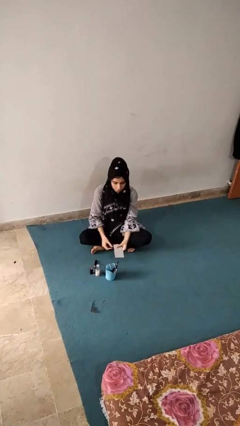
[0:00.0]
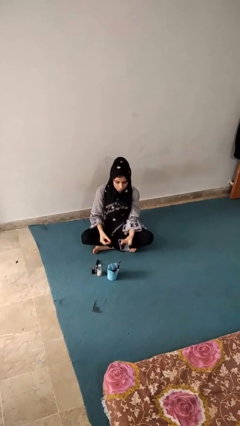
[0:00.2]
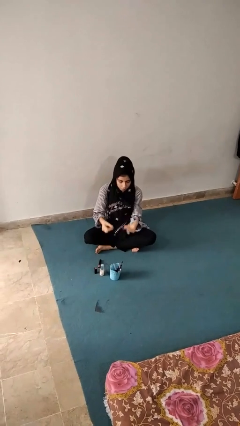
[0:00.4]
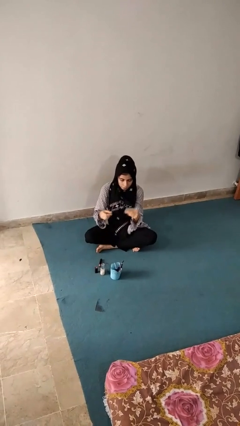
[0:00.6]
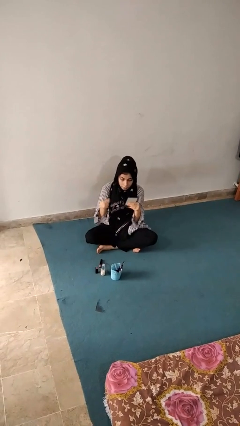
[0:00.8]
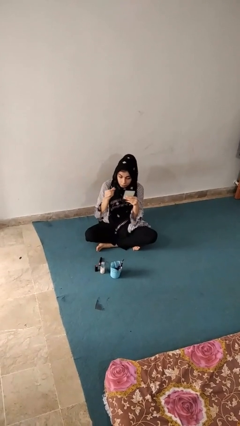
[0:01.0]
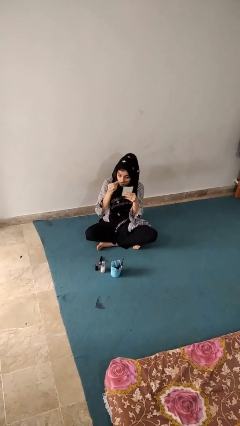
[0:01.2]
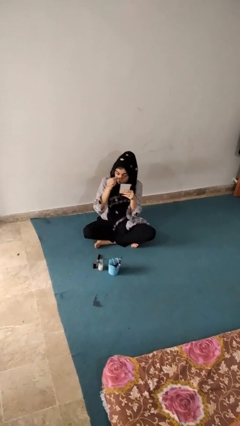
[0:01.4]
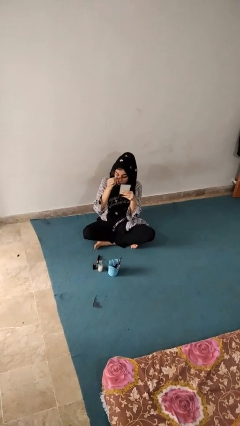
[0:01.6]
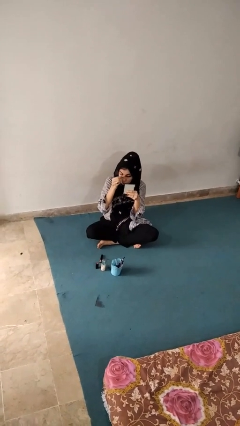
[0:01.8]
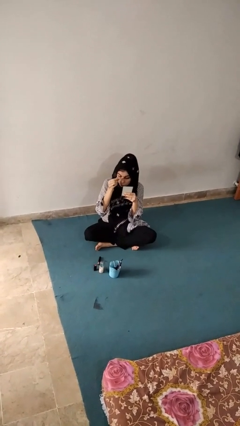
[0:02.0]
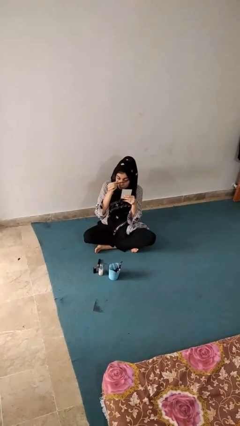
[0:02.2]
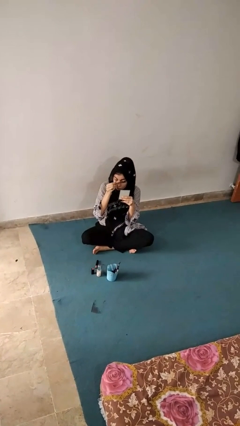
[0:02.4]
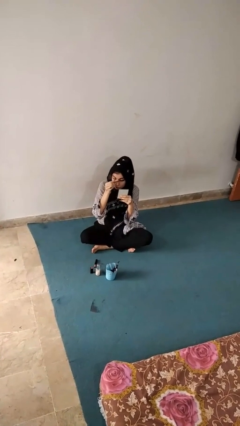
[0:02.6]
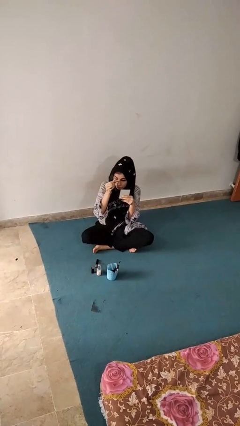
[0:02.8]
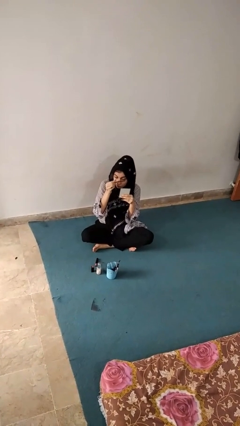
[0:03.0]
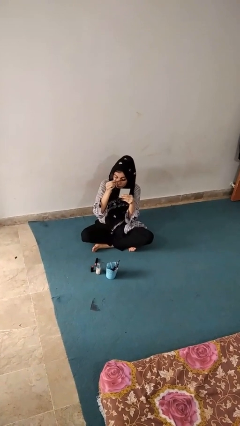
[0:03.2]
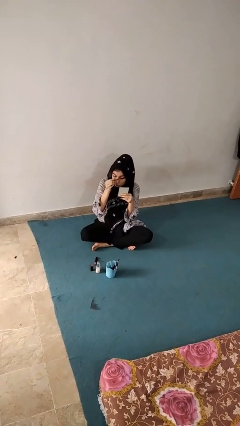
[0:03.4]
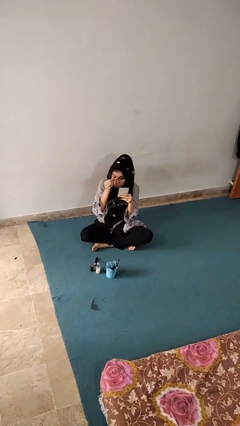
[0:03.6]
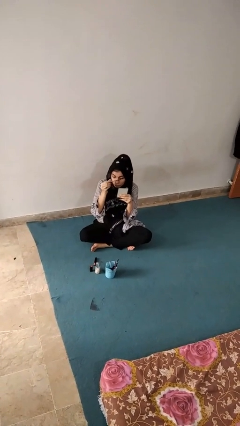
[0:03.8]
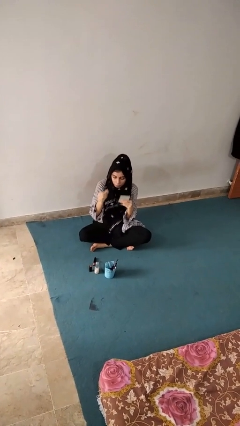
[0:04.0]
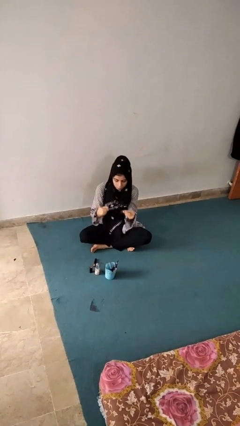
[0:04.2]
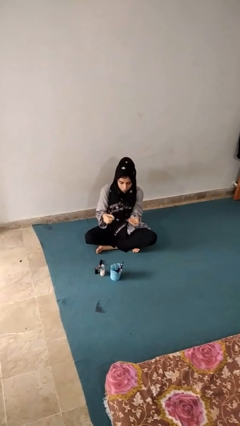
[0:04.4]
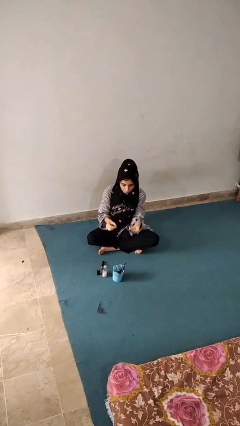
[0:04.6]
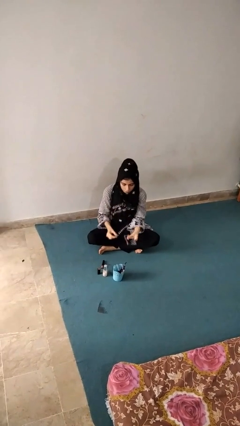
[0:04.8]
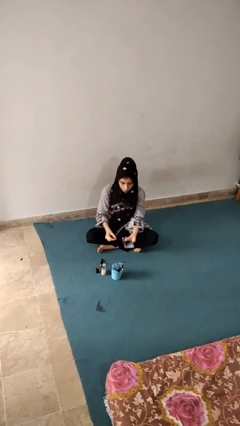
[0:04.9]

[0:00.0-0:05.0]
person applies eye makeup

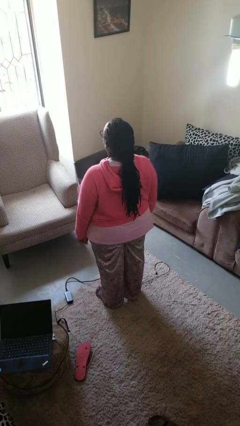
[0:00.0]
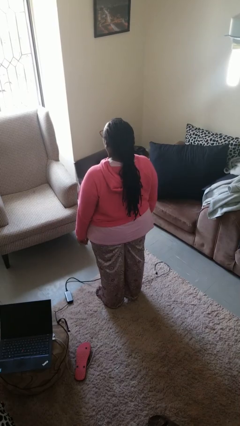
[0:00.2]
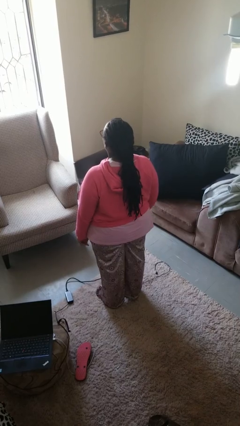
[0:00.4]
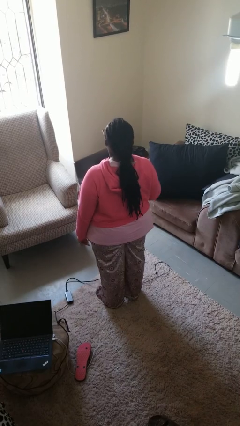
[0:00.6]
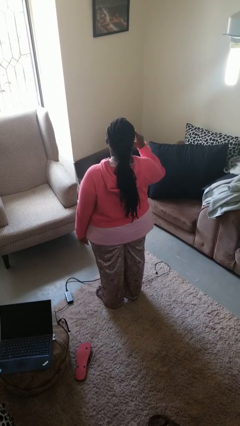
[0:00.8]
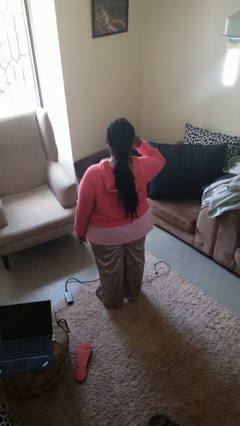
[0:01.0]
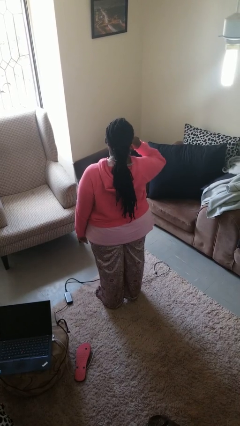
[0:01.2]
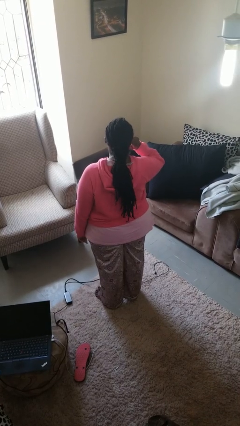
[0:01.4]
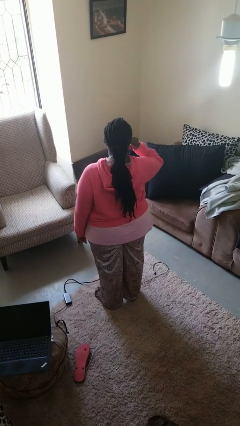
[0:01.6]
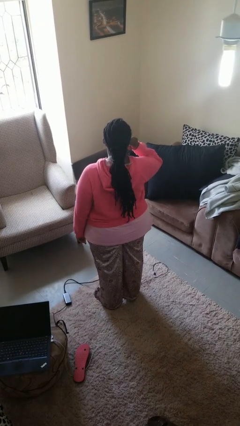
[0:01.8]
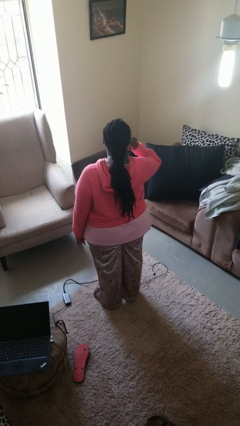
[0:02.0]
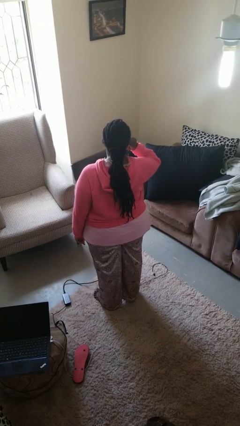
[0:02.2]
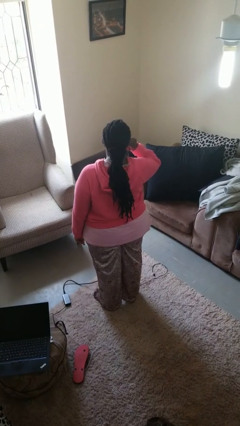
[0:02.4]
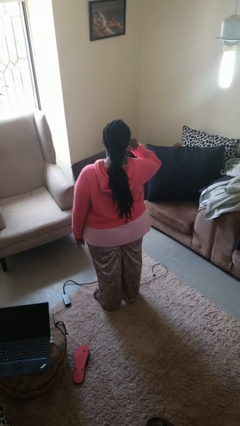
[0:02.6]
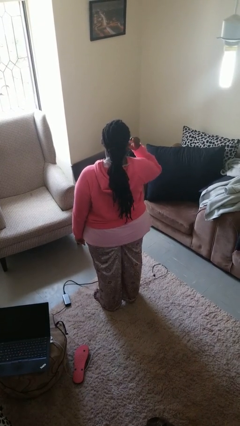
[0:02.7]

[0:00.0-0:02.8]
person gestures listen closely

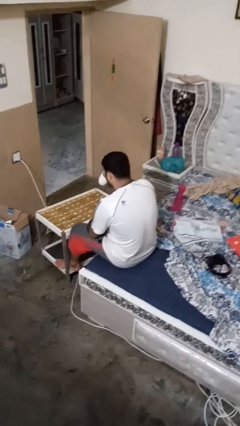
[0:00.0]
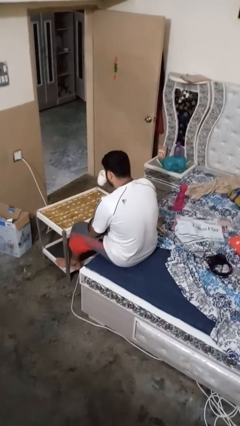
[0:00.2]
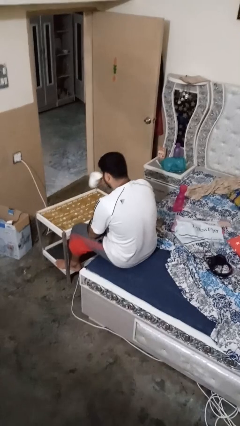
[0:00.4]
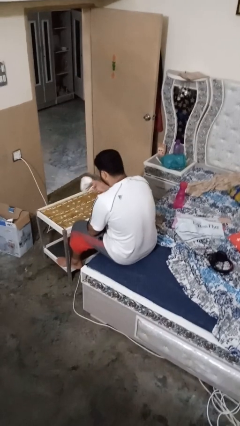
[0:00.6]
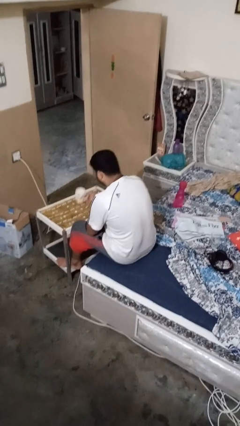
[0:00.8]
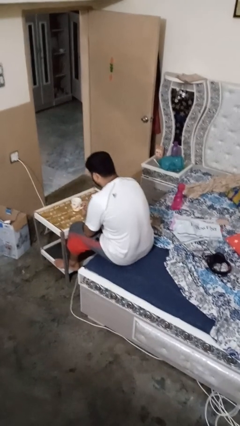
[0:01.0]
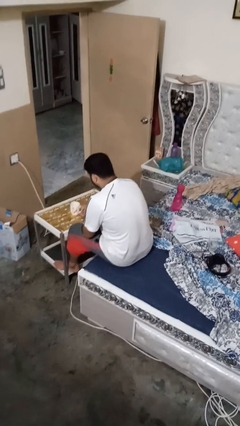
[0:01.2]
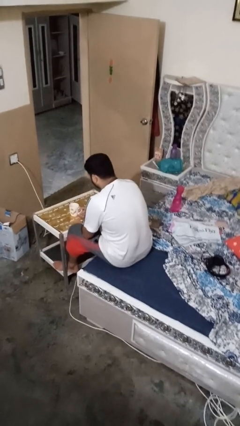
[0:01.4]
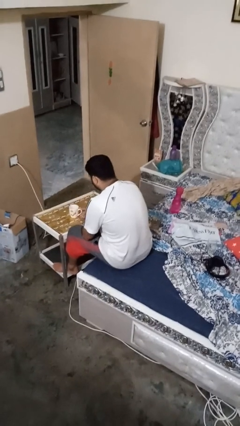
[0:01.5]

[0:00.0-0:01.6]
person puts down object on table

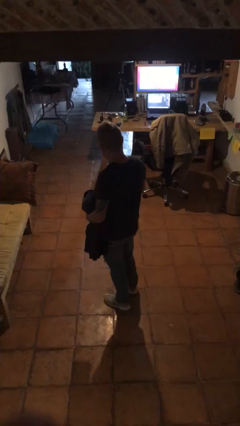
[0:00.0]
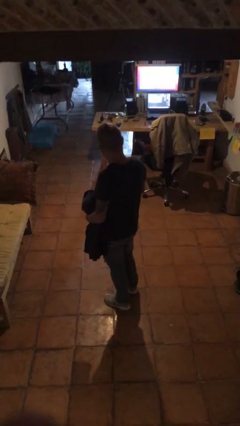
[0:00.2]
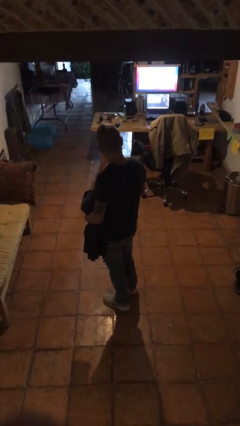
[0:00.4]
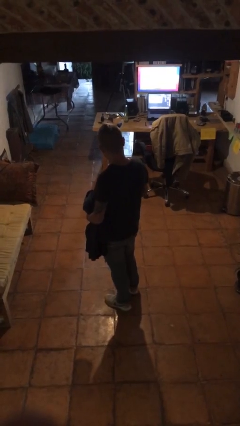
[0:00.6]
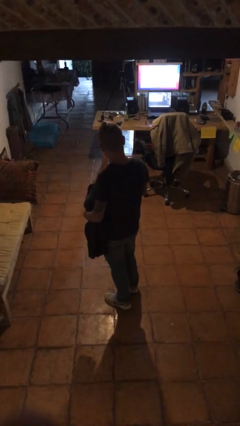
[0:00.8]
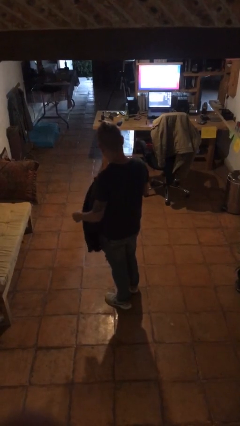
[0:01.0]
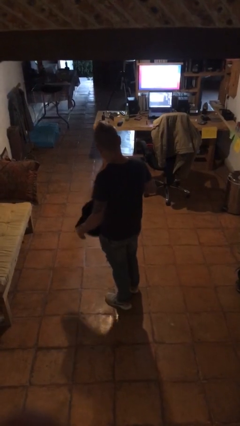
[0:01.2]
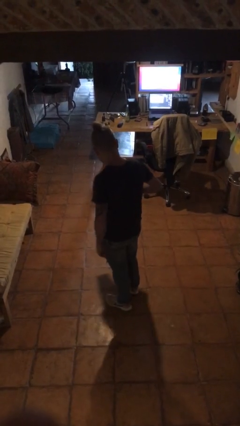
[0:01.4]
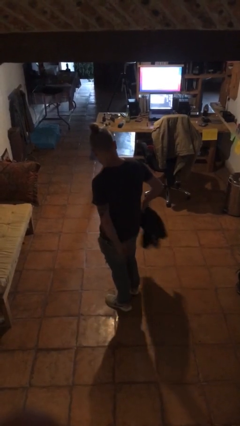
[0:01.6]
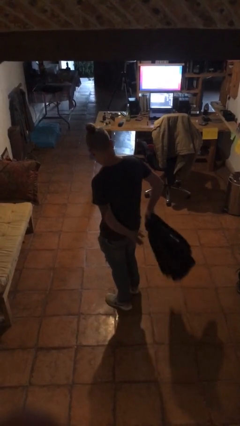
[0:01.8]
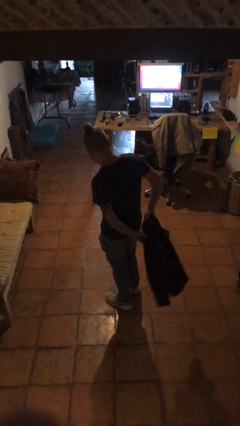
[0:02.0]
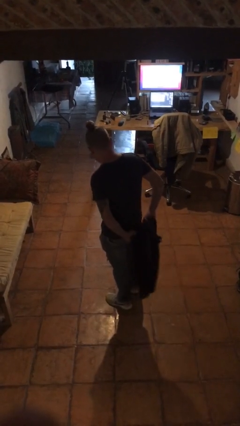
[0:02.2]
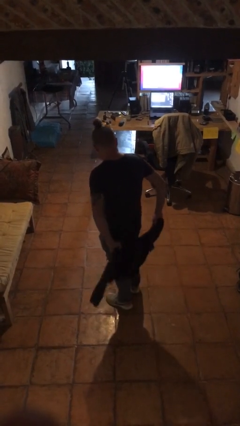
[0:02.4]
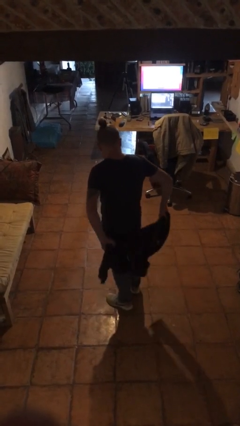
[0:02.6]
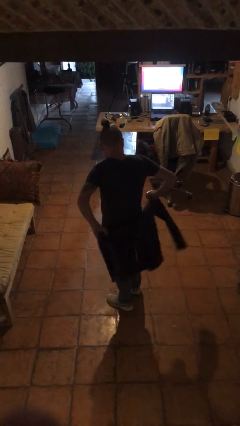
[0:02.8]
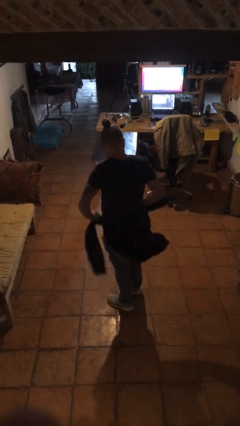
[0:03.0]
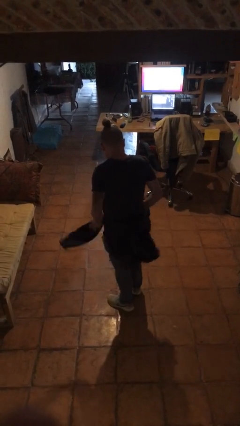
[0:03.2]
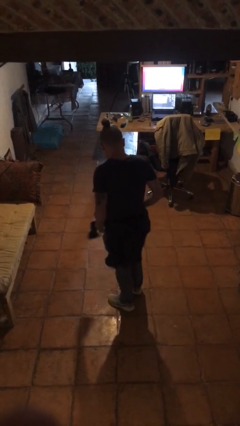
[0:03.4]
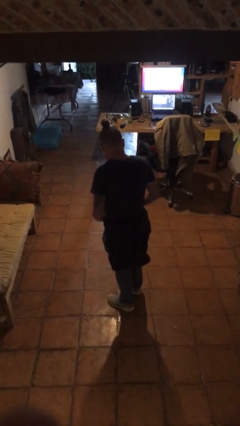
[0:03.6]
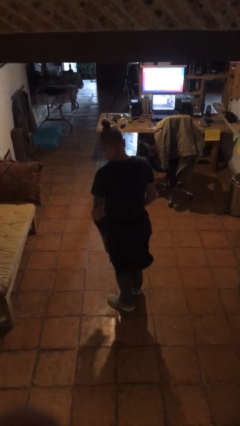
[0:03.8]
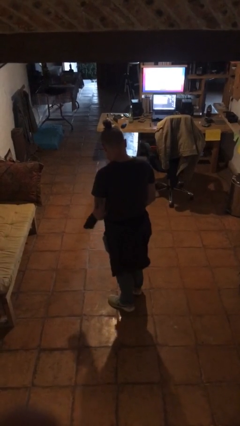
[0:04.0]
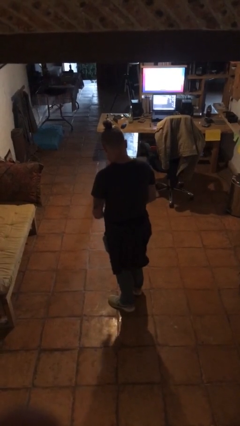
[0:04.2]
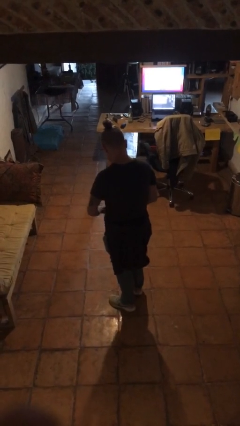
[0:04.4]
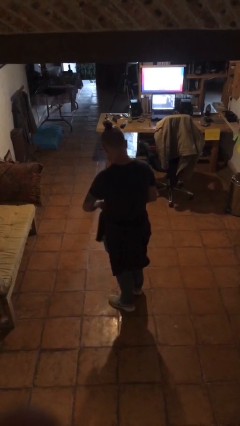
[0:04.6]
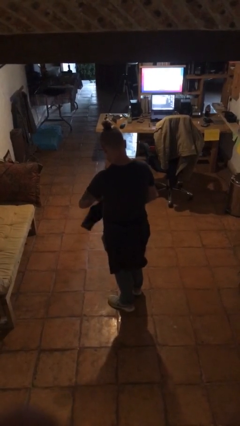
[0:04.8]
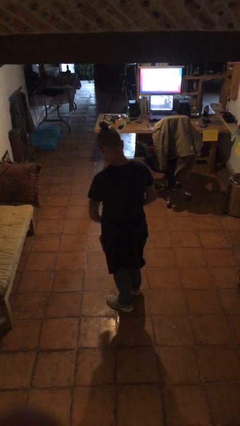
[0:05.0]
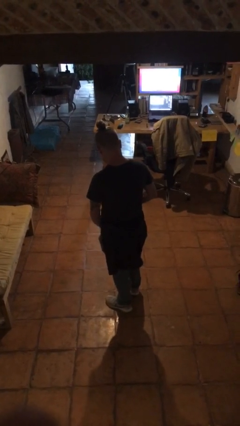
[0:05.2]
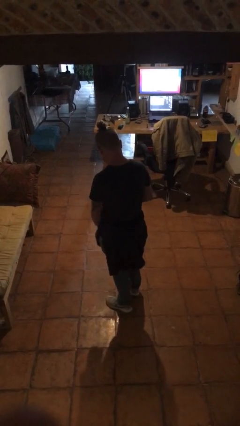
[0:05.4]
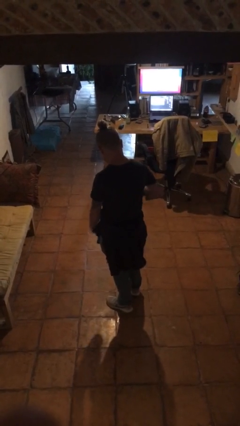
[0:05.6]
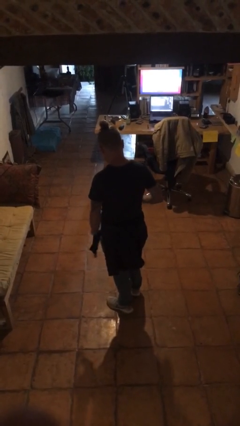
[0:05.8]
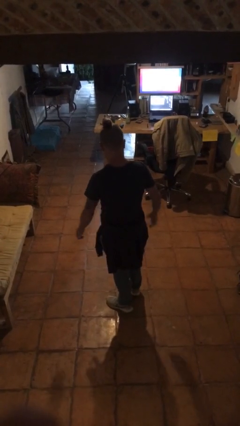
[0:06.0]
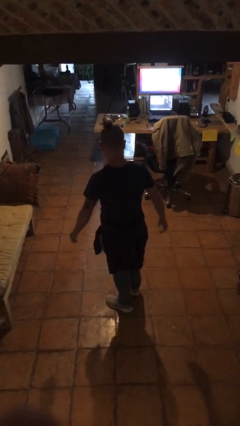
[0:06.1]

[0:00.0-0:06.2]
person ties jacket around waist

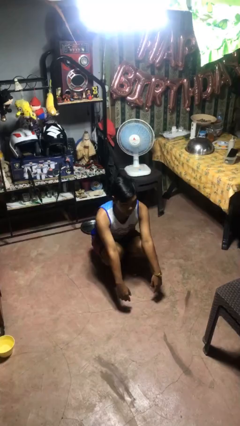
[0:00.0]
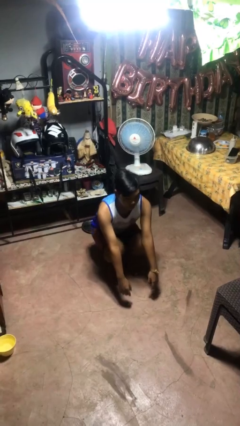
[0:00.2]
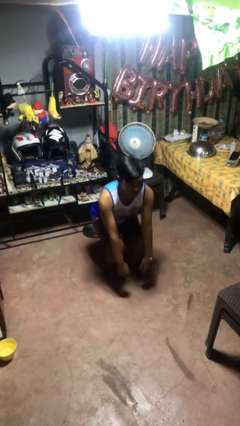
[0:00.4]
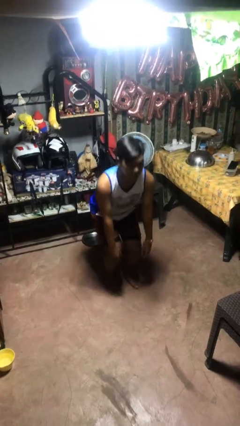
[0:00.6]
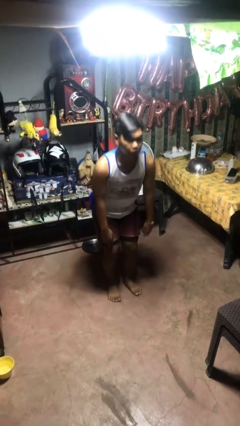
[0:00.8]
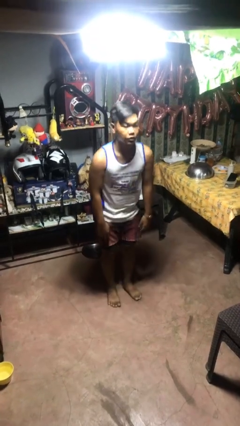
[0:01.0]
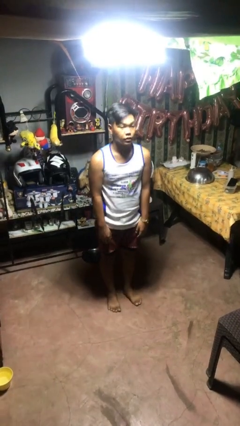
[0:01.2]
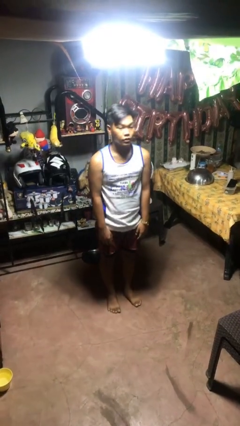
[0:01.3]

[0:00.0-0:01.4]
person stands up

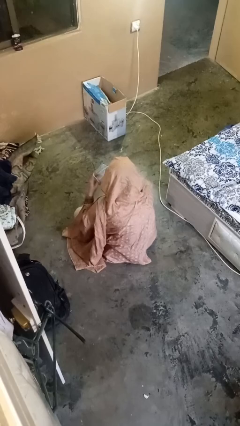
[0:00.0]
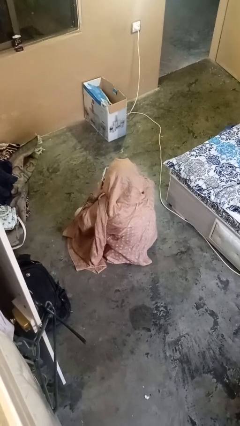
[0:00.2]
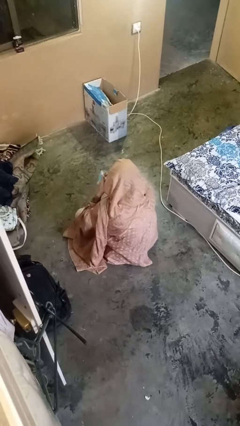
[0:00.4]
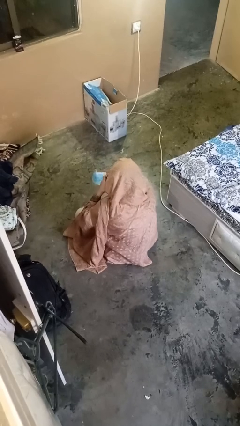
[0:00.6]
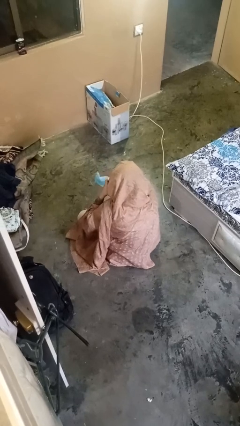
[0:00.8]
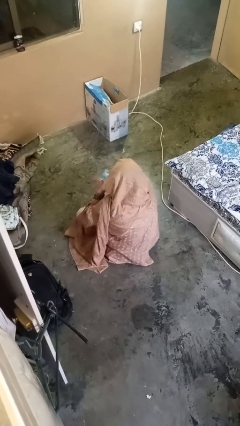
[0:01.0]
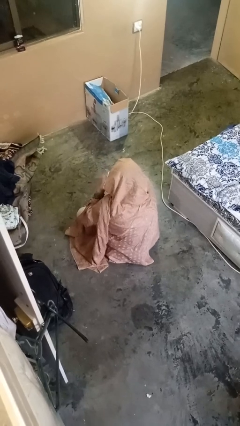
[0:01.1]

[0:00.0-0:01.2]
person puts on facemask
